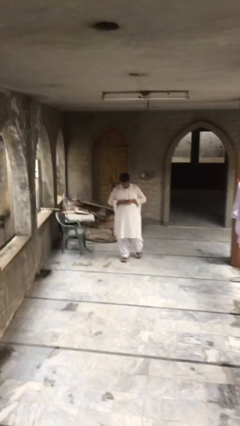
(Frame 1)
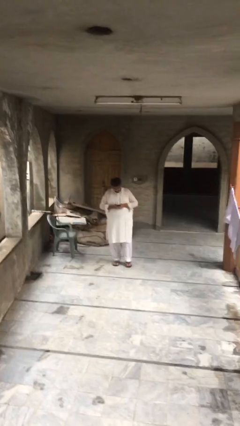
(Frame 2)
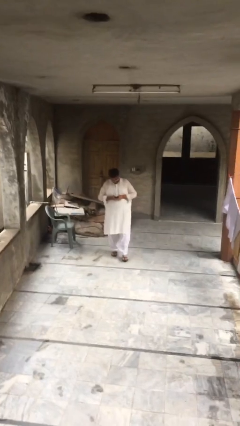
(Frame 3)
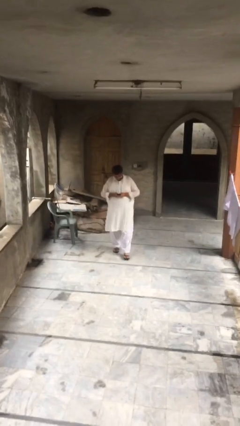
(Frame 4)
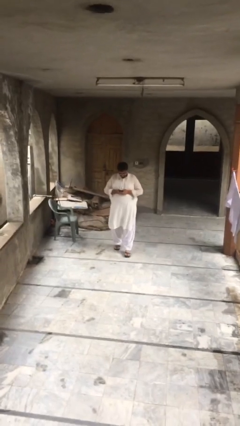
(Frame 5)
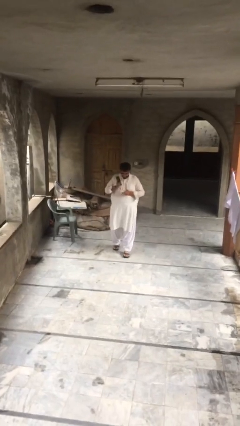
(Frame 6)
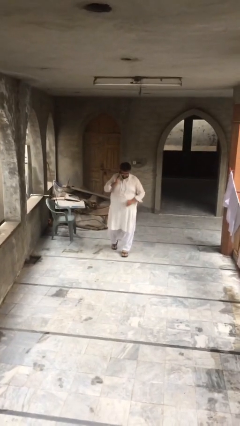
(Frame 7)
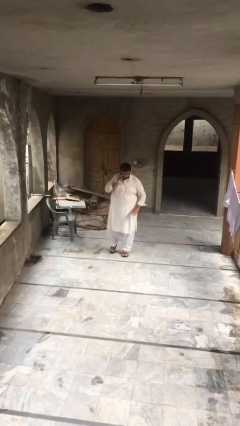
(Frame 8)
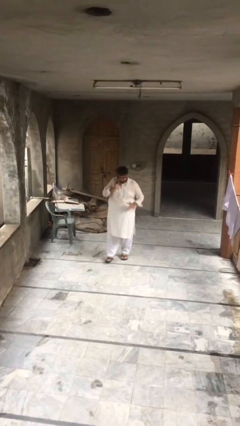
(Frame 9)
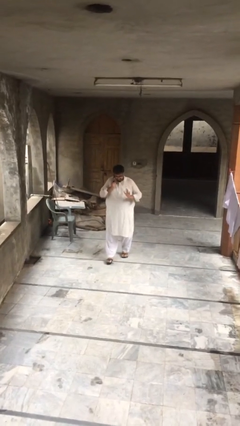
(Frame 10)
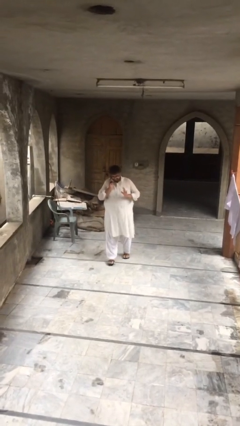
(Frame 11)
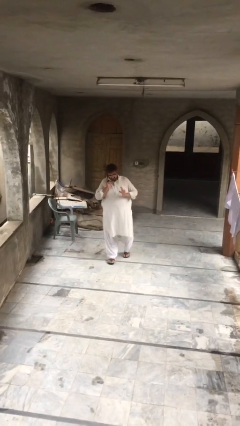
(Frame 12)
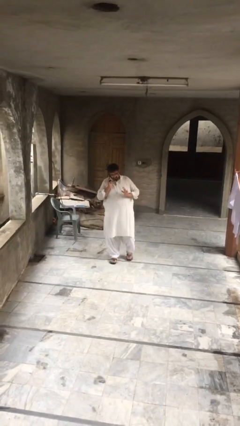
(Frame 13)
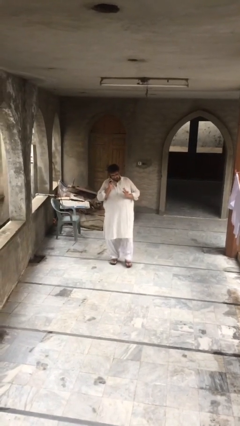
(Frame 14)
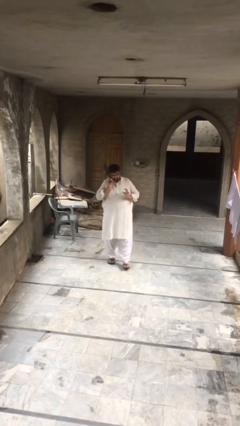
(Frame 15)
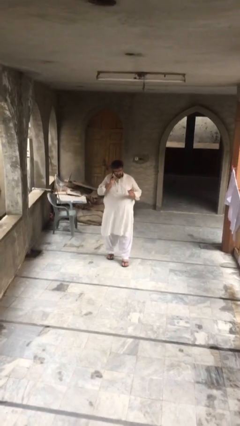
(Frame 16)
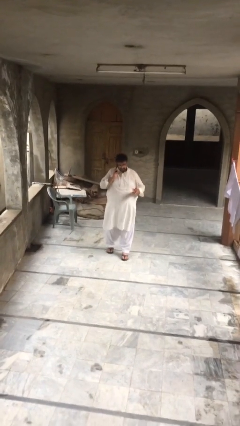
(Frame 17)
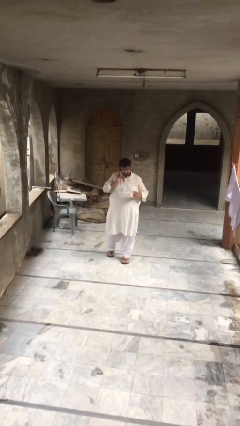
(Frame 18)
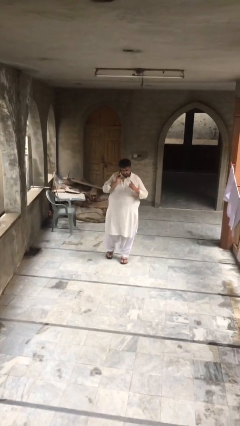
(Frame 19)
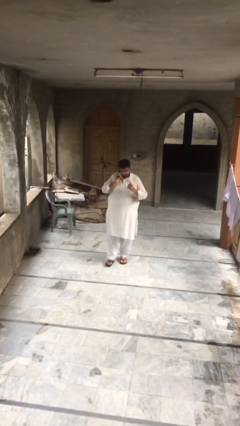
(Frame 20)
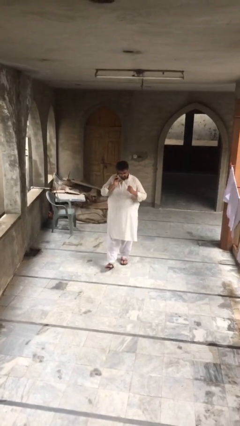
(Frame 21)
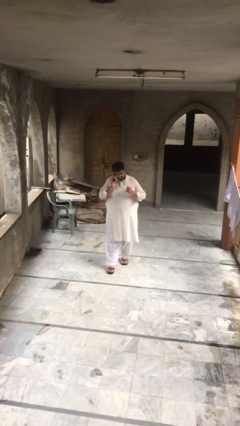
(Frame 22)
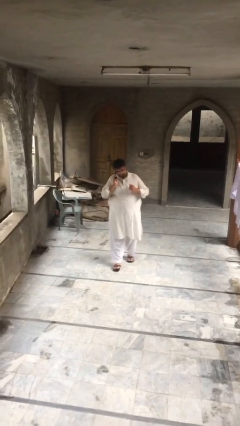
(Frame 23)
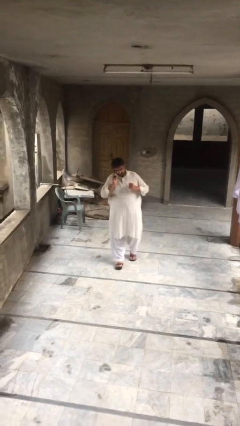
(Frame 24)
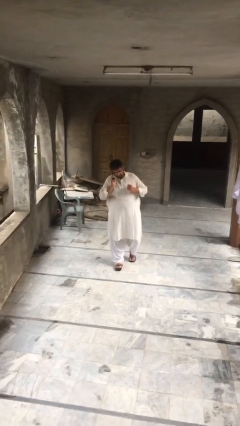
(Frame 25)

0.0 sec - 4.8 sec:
person talks on phone

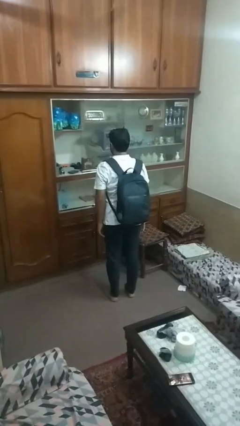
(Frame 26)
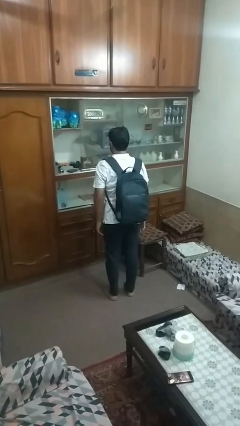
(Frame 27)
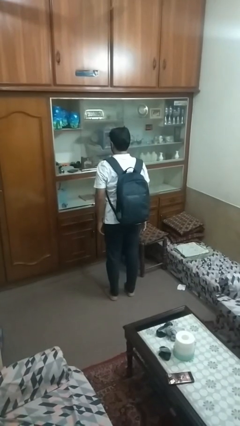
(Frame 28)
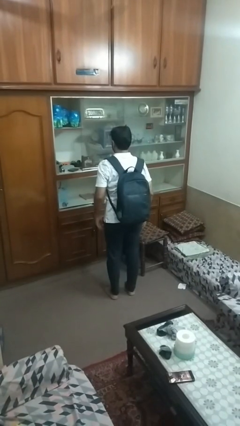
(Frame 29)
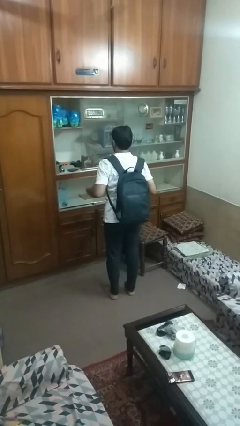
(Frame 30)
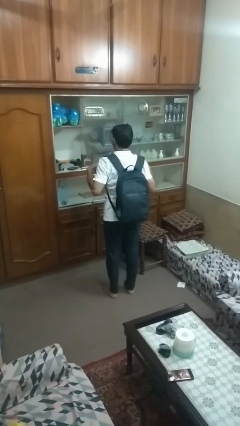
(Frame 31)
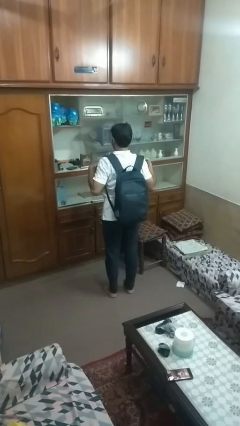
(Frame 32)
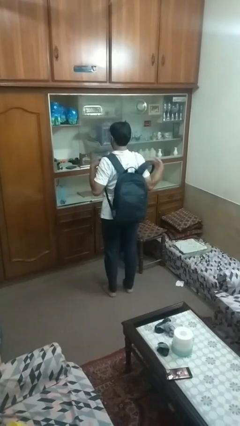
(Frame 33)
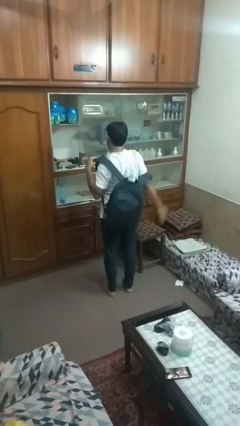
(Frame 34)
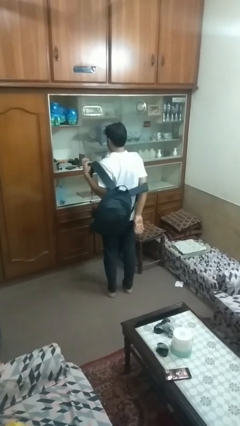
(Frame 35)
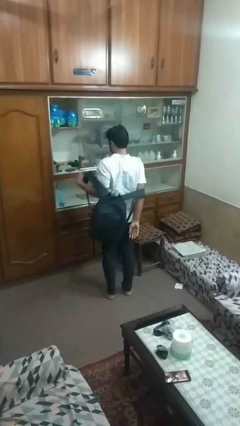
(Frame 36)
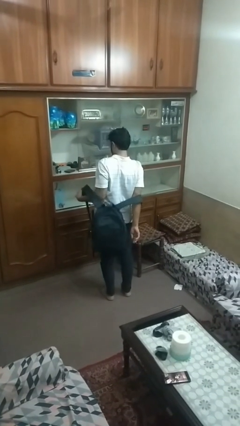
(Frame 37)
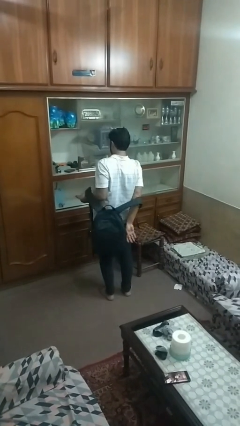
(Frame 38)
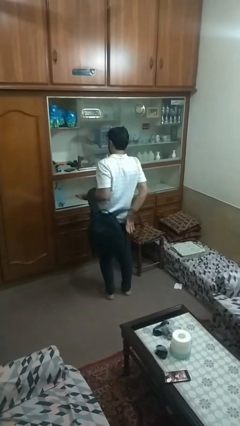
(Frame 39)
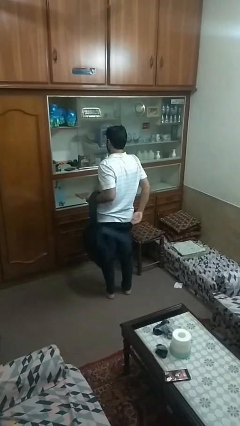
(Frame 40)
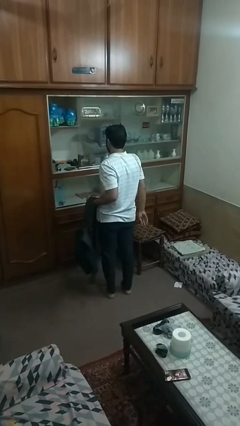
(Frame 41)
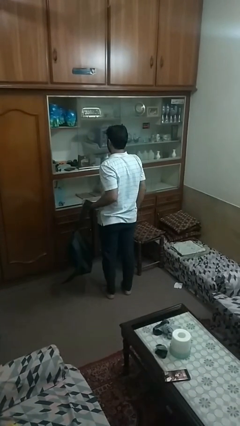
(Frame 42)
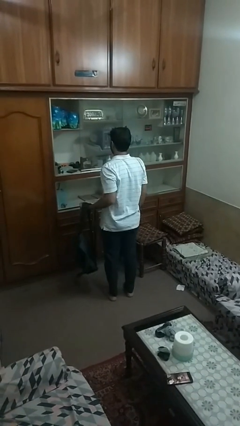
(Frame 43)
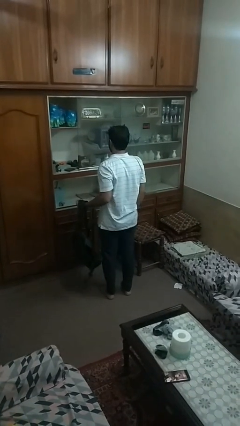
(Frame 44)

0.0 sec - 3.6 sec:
person takes off backpack

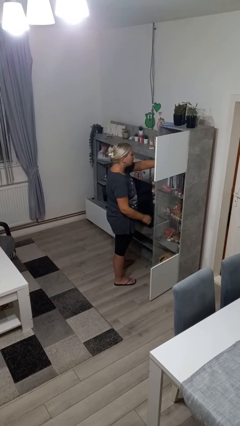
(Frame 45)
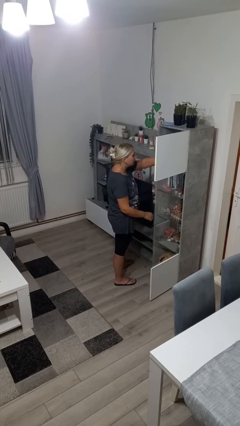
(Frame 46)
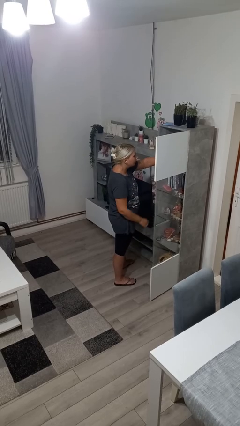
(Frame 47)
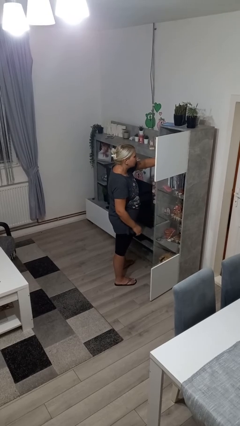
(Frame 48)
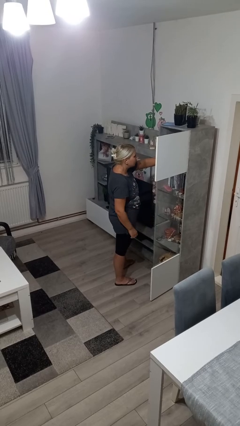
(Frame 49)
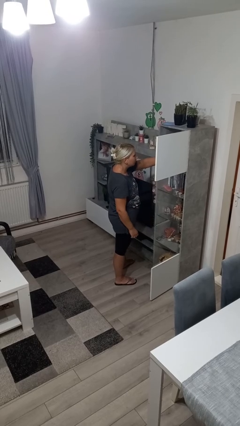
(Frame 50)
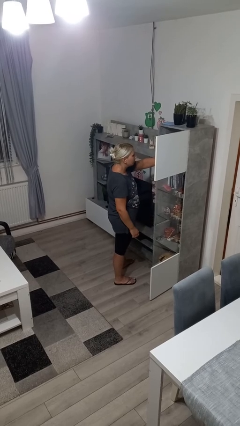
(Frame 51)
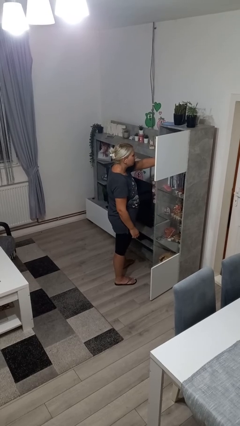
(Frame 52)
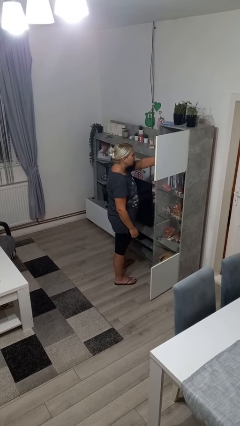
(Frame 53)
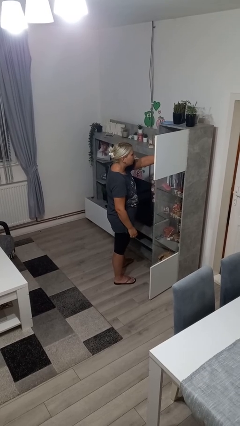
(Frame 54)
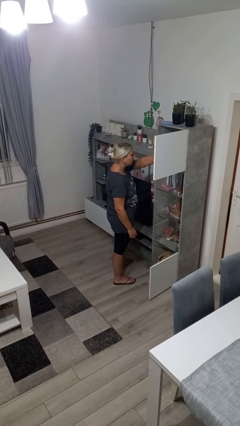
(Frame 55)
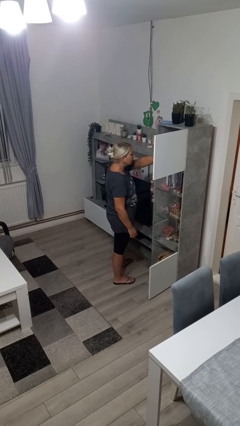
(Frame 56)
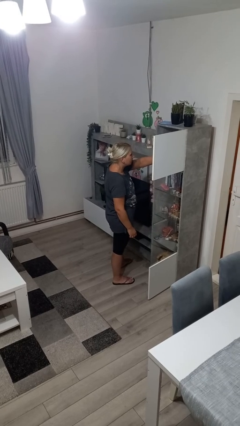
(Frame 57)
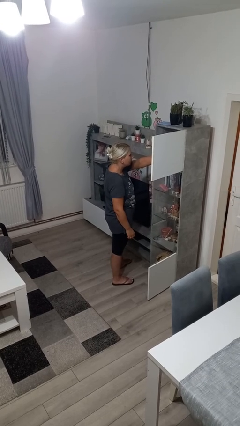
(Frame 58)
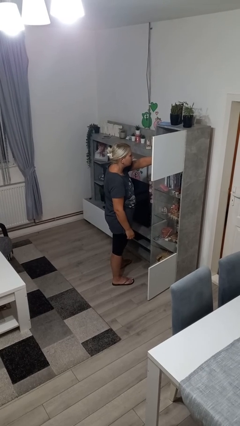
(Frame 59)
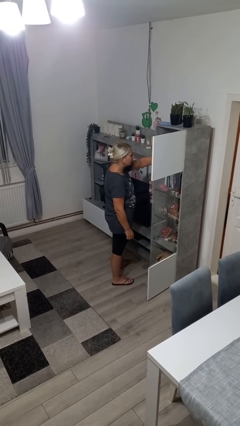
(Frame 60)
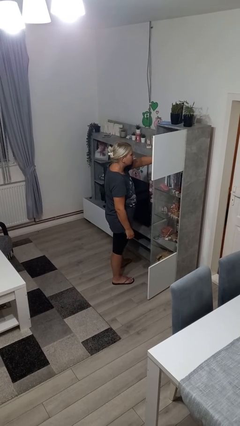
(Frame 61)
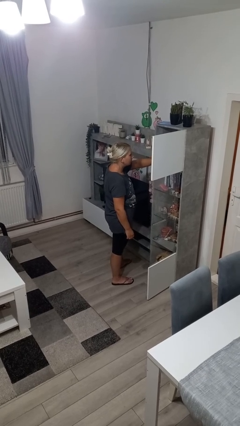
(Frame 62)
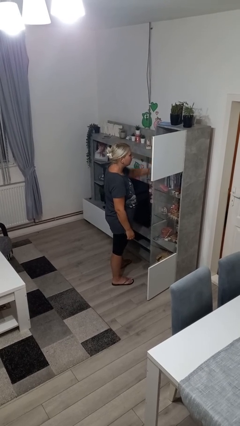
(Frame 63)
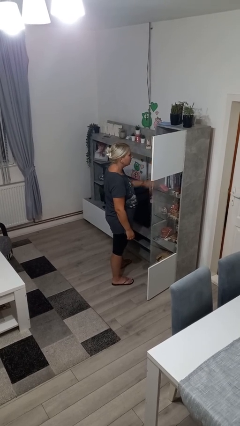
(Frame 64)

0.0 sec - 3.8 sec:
person searches in cabinet

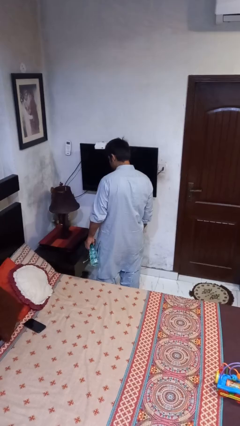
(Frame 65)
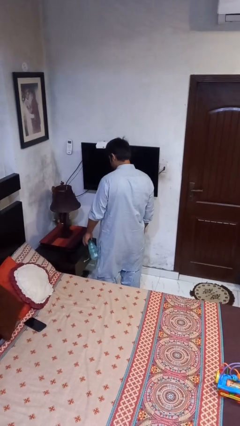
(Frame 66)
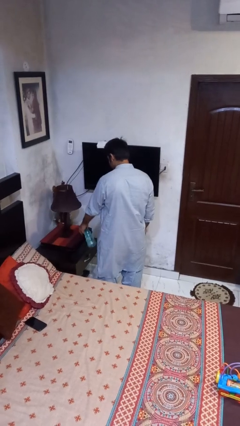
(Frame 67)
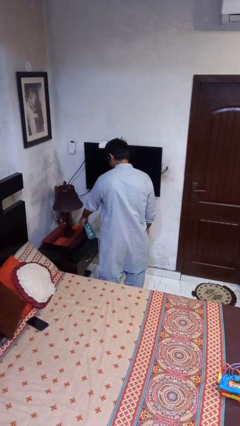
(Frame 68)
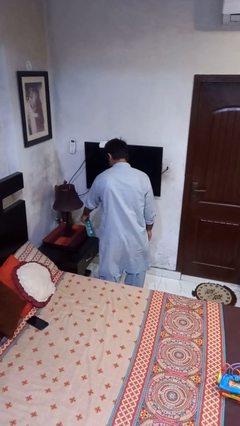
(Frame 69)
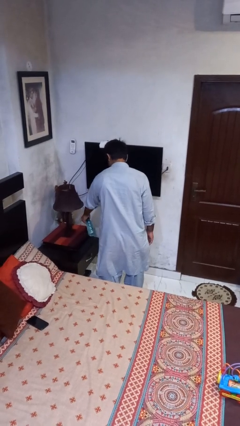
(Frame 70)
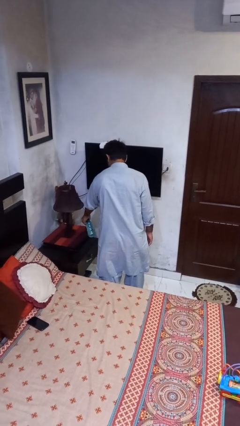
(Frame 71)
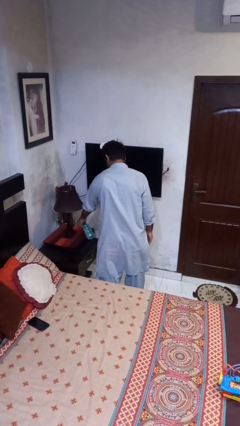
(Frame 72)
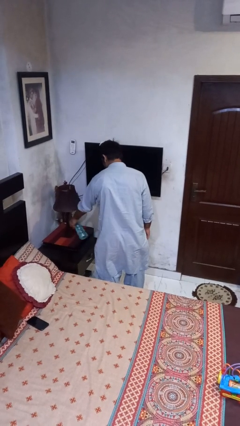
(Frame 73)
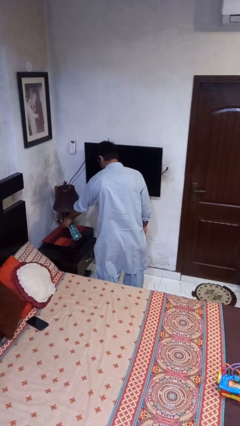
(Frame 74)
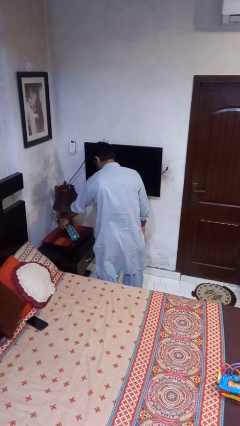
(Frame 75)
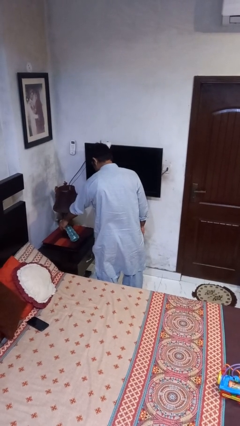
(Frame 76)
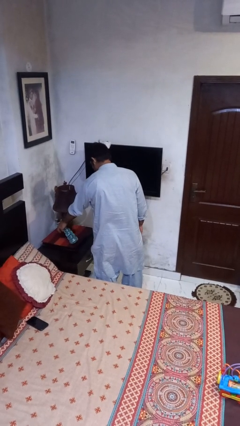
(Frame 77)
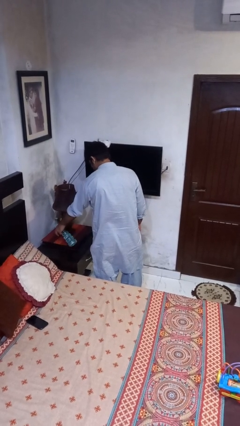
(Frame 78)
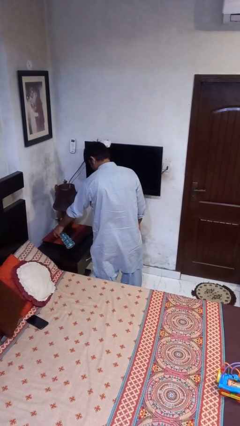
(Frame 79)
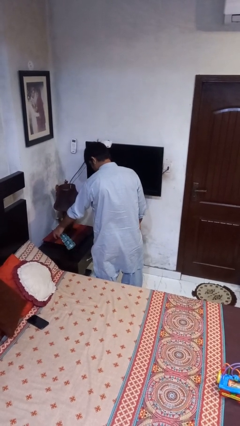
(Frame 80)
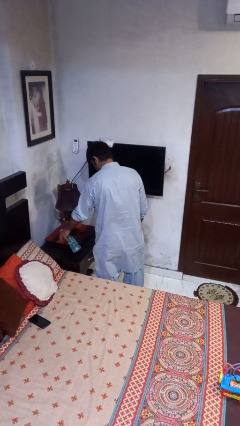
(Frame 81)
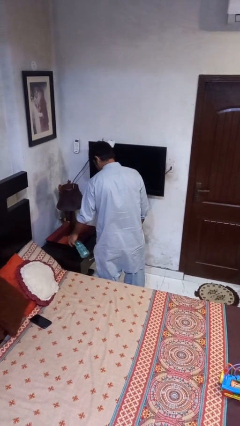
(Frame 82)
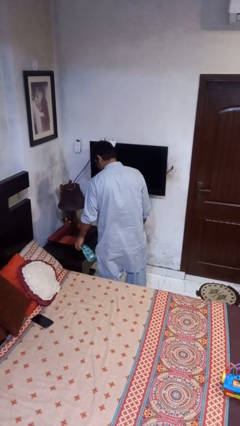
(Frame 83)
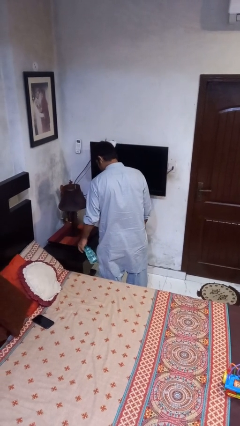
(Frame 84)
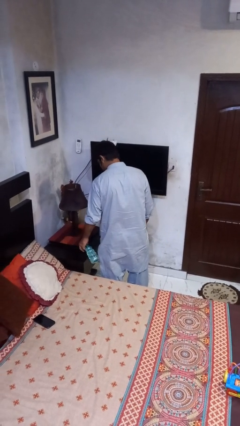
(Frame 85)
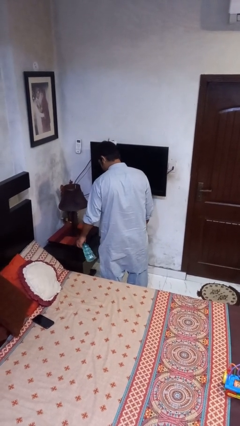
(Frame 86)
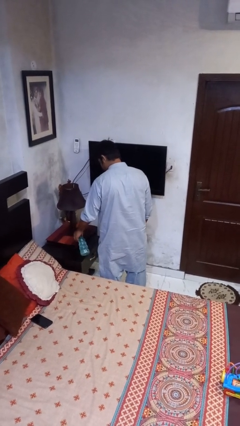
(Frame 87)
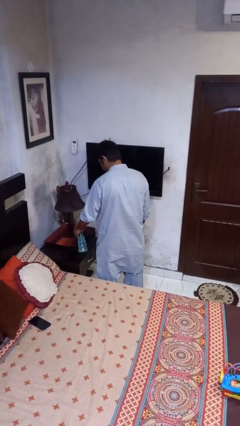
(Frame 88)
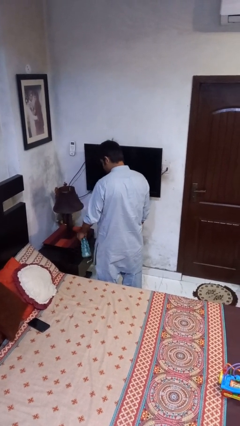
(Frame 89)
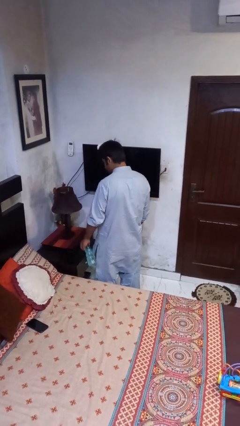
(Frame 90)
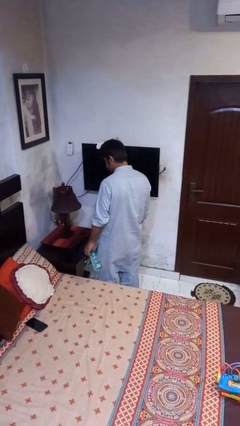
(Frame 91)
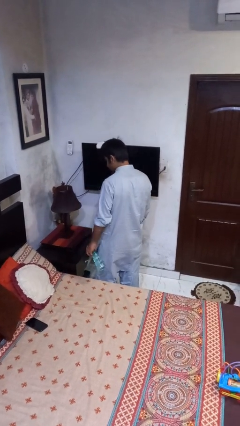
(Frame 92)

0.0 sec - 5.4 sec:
person sprays from bottle
